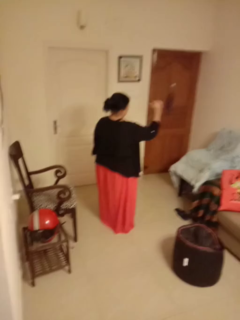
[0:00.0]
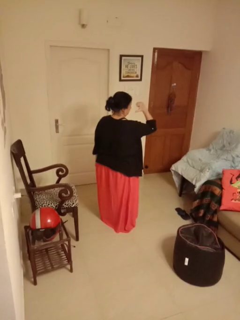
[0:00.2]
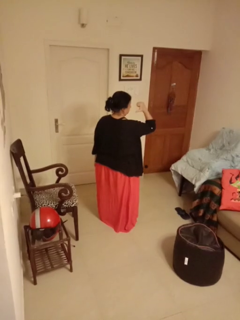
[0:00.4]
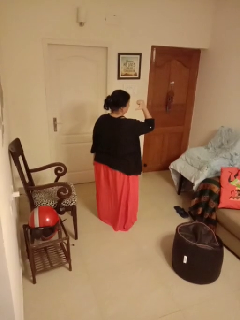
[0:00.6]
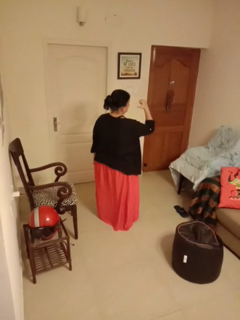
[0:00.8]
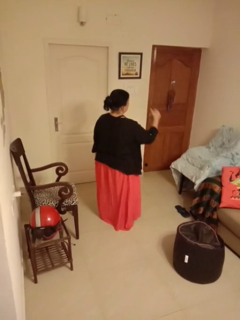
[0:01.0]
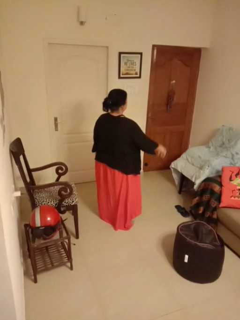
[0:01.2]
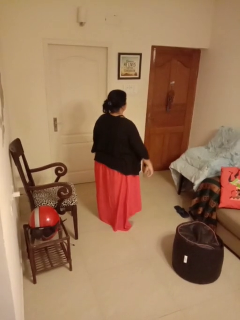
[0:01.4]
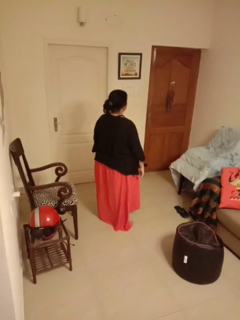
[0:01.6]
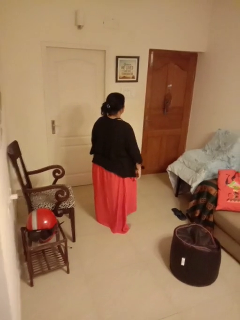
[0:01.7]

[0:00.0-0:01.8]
person gestures behind me

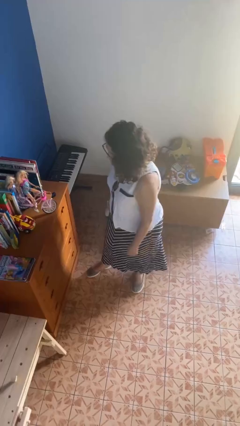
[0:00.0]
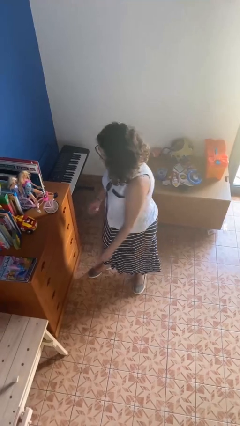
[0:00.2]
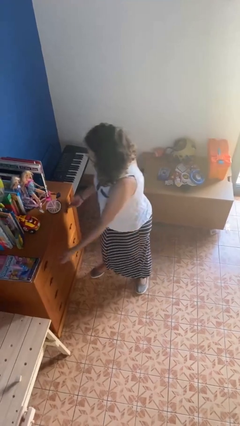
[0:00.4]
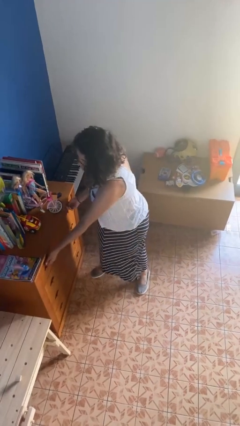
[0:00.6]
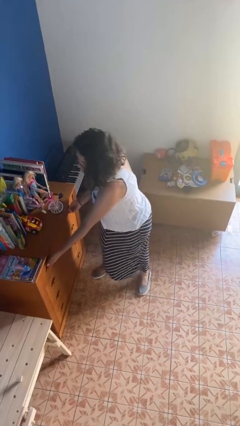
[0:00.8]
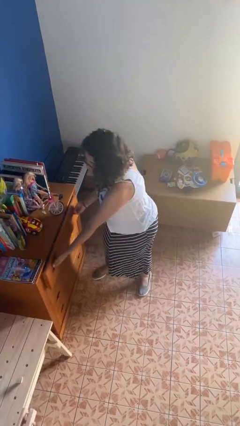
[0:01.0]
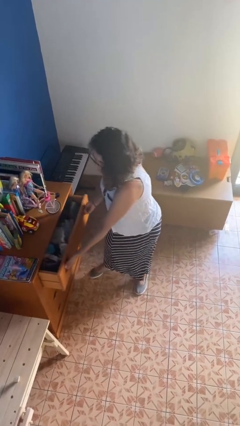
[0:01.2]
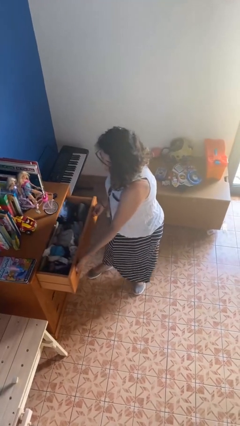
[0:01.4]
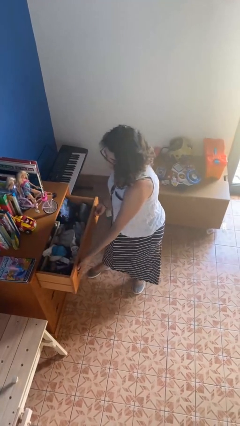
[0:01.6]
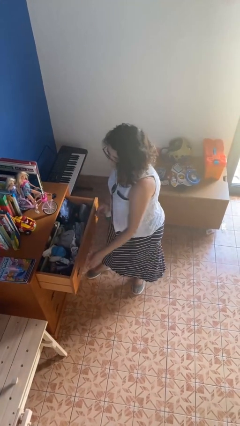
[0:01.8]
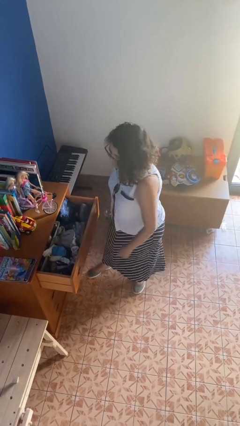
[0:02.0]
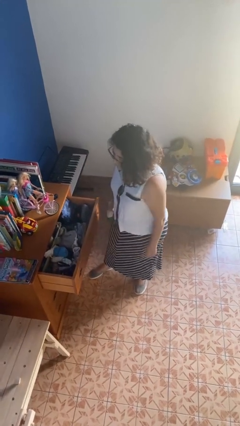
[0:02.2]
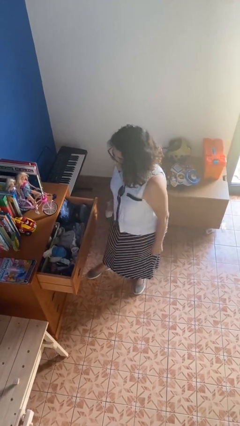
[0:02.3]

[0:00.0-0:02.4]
person opens dresser drawer

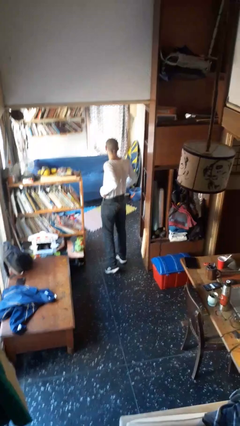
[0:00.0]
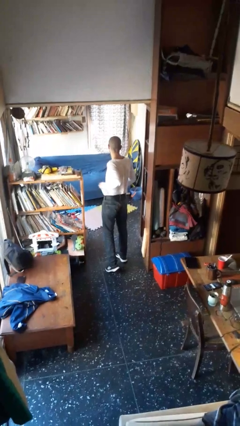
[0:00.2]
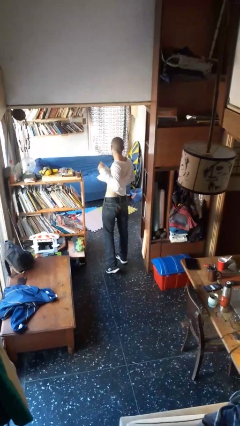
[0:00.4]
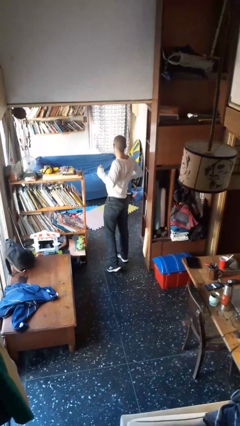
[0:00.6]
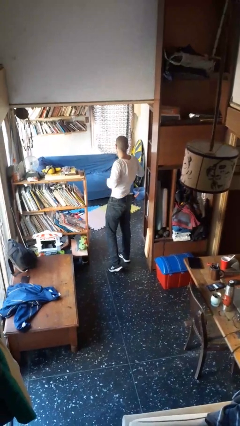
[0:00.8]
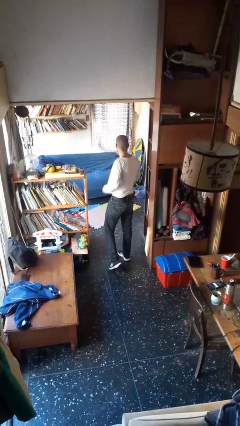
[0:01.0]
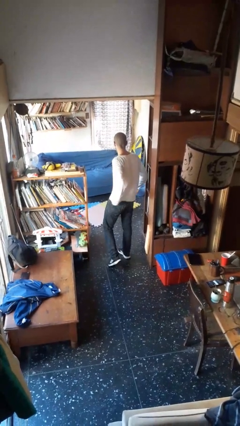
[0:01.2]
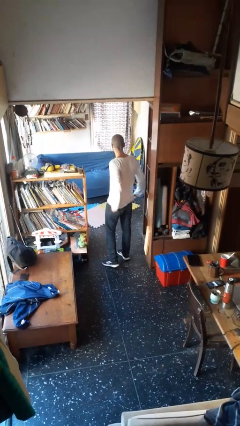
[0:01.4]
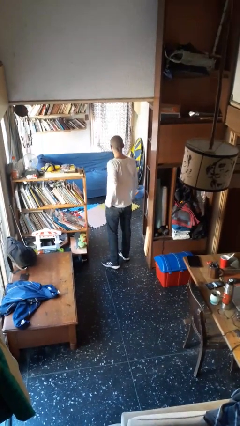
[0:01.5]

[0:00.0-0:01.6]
person untucks shirt

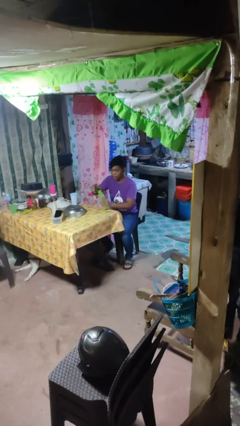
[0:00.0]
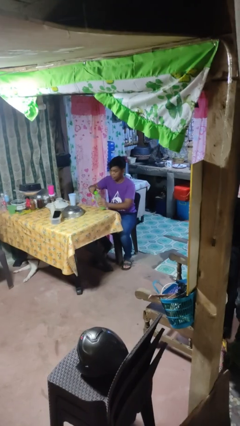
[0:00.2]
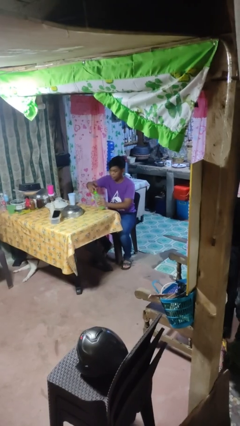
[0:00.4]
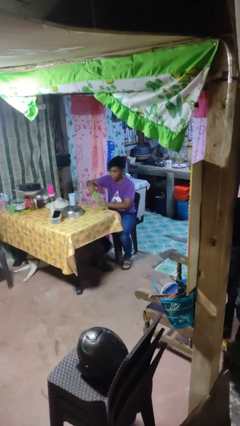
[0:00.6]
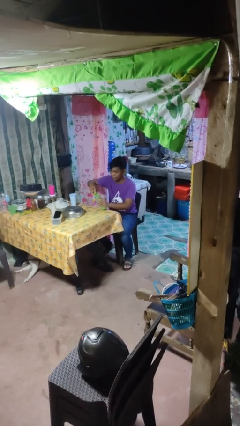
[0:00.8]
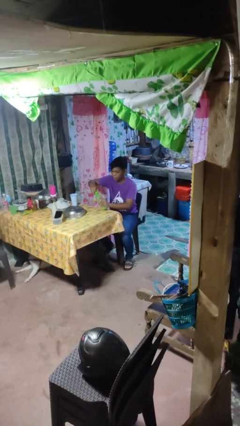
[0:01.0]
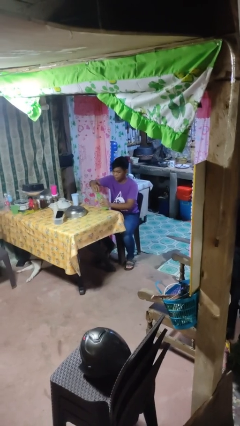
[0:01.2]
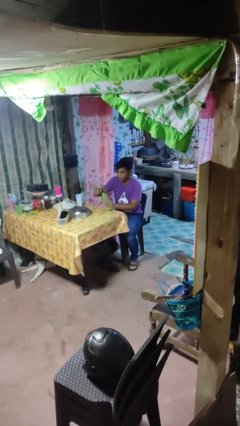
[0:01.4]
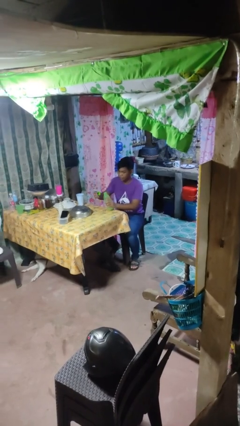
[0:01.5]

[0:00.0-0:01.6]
person unscrews lid from bottle

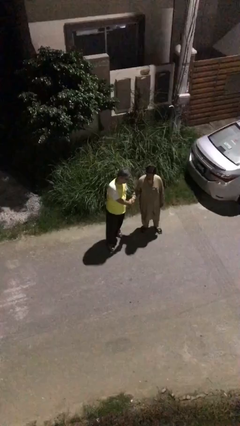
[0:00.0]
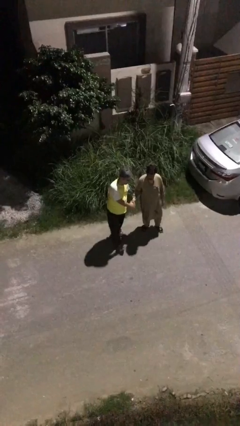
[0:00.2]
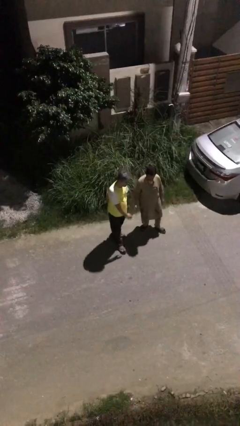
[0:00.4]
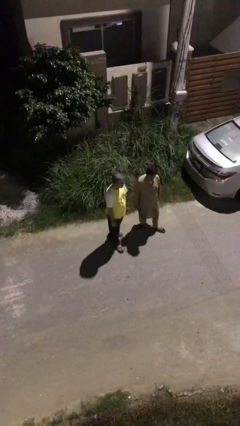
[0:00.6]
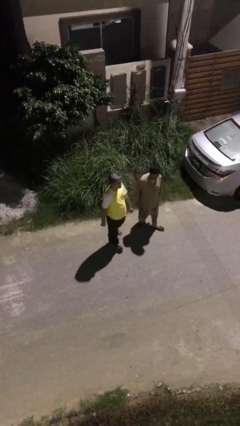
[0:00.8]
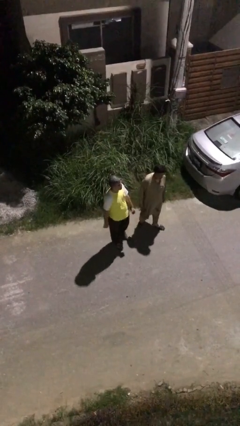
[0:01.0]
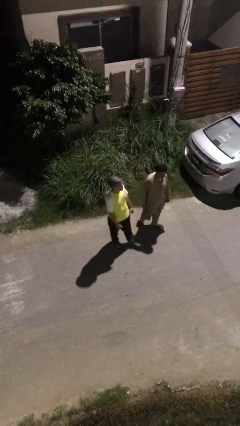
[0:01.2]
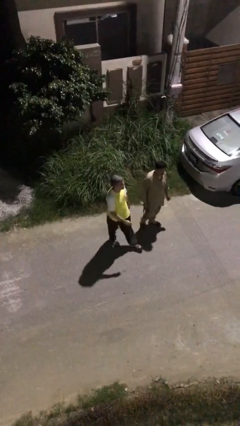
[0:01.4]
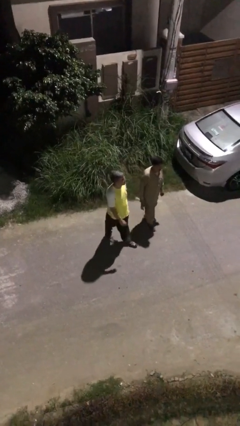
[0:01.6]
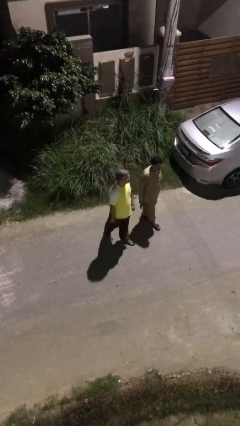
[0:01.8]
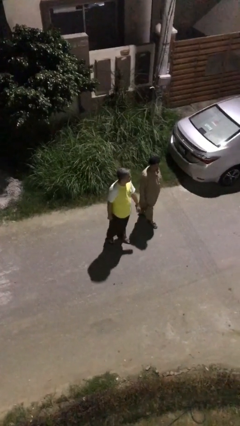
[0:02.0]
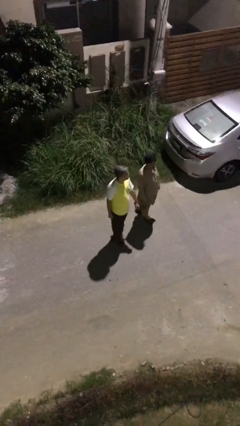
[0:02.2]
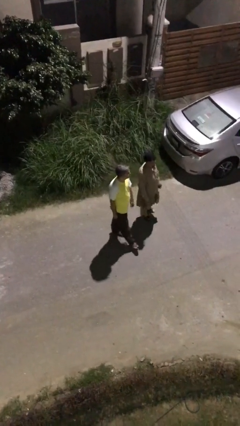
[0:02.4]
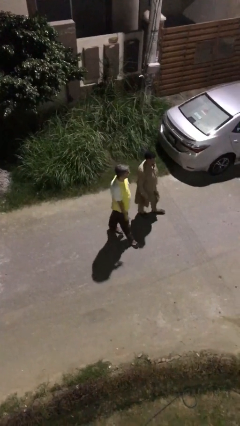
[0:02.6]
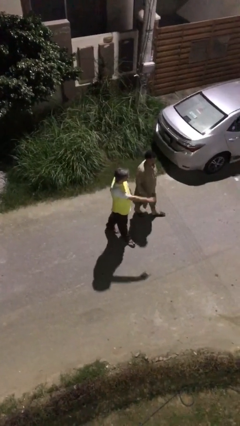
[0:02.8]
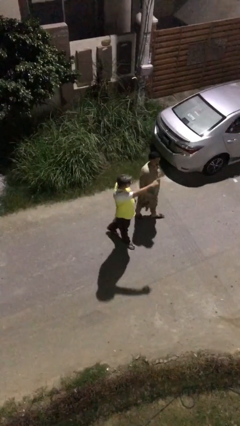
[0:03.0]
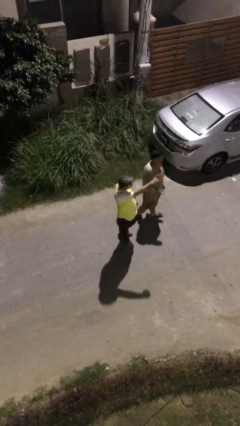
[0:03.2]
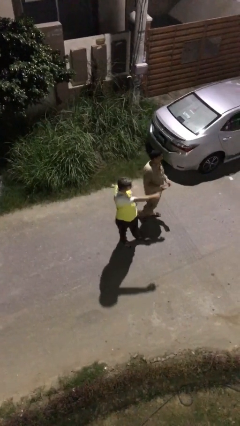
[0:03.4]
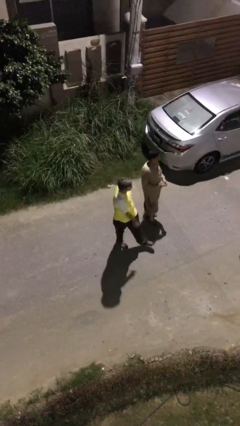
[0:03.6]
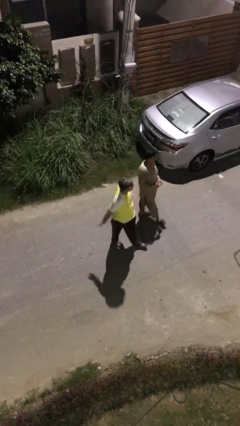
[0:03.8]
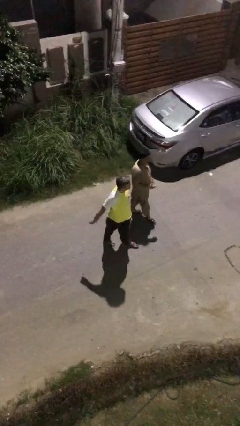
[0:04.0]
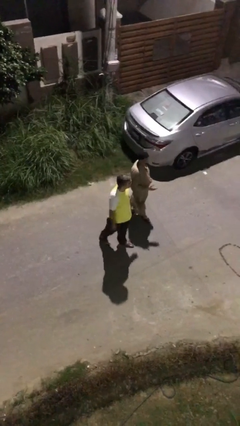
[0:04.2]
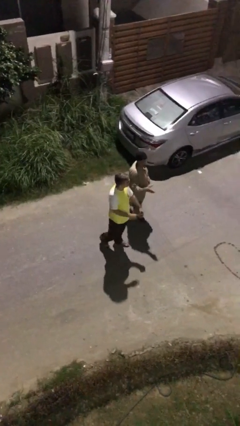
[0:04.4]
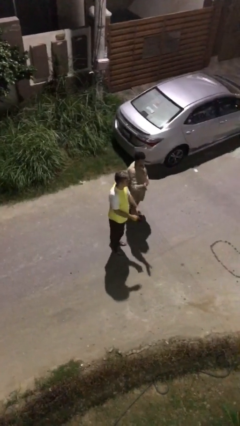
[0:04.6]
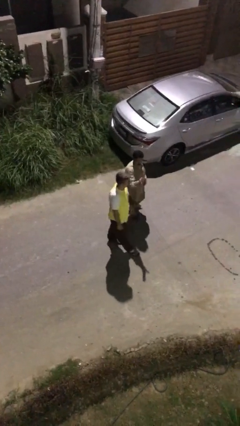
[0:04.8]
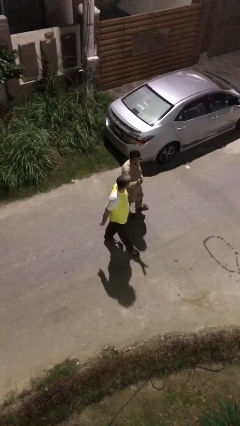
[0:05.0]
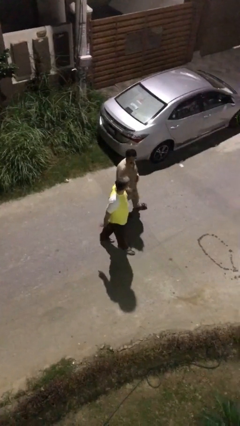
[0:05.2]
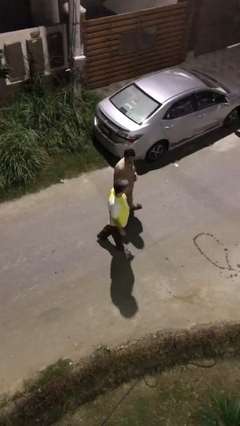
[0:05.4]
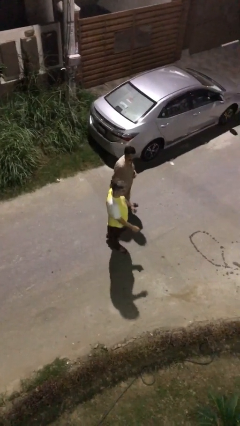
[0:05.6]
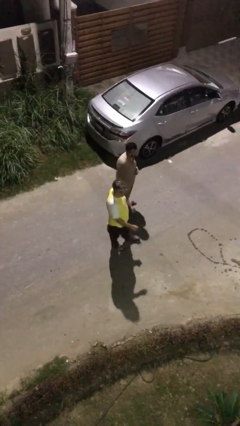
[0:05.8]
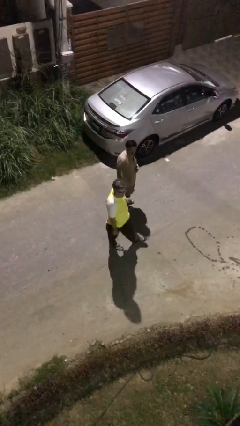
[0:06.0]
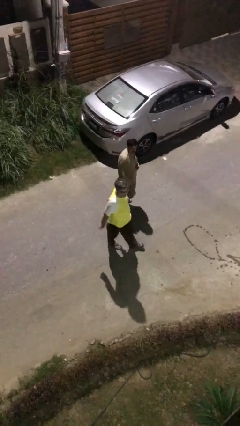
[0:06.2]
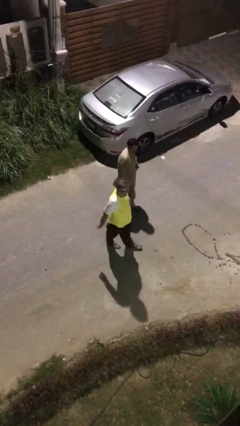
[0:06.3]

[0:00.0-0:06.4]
person talks to person

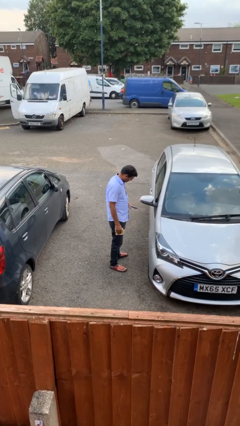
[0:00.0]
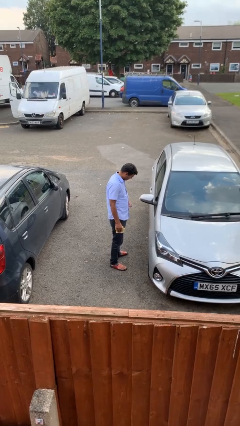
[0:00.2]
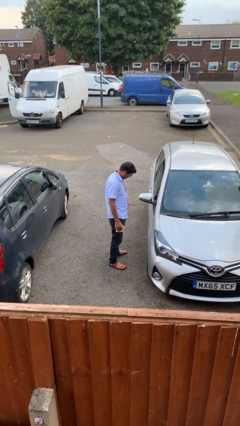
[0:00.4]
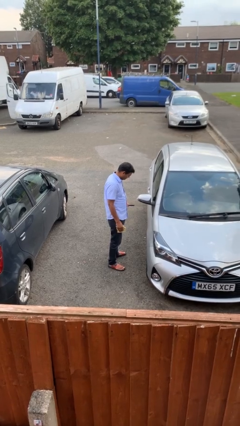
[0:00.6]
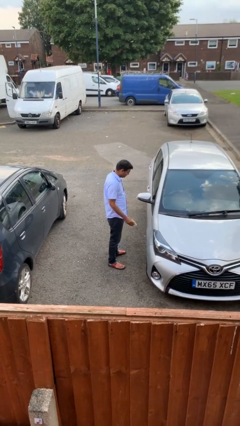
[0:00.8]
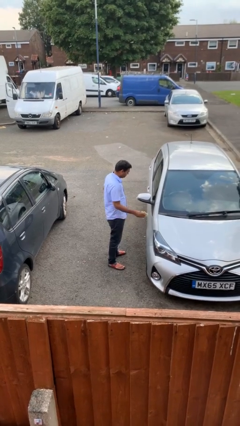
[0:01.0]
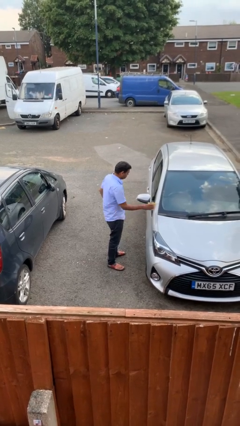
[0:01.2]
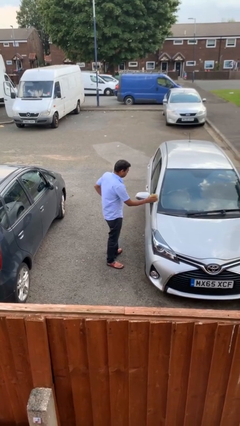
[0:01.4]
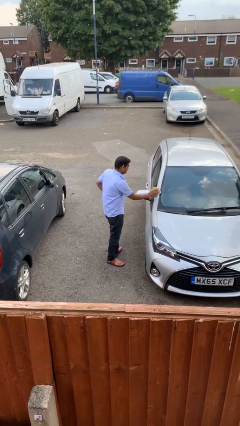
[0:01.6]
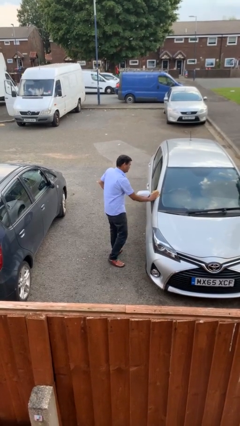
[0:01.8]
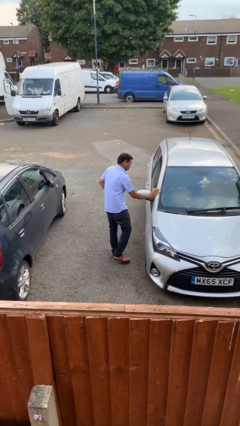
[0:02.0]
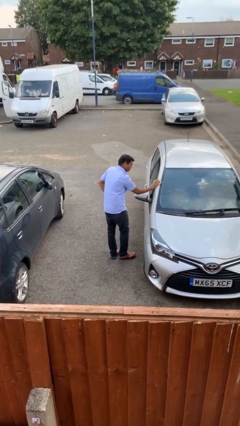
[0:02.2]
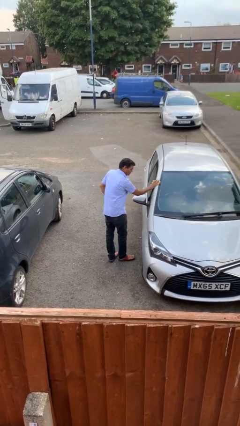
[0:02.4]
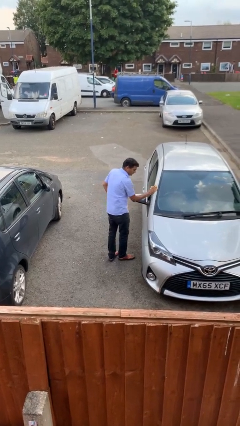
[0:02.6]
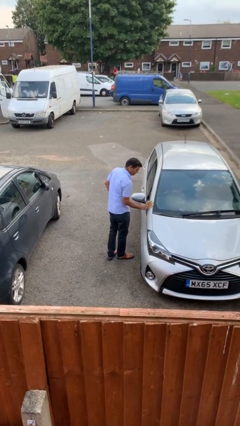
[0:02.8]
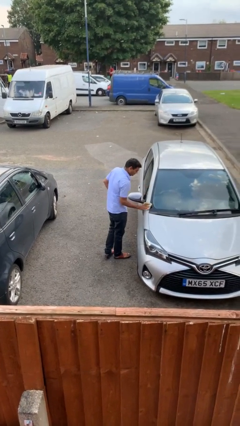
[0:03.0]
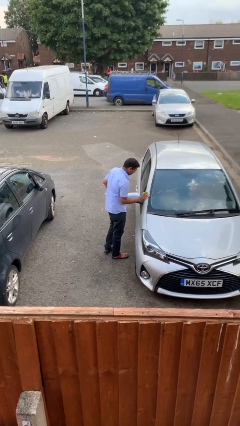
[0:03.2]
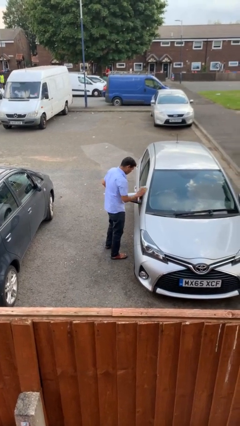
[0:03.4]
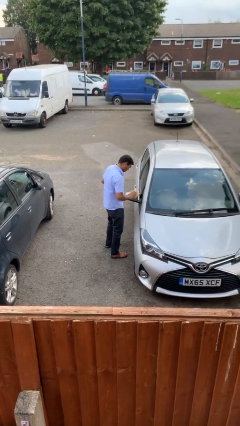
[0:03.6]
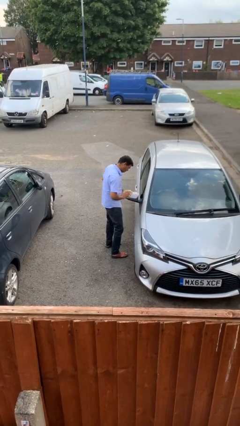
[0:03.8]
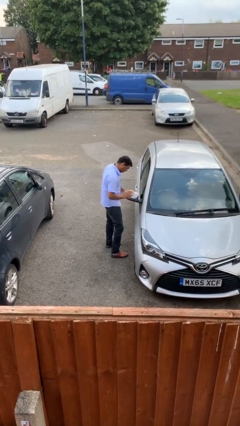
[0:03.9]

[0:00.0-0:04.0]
person polishes car with rag
